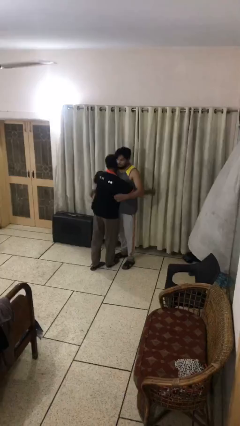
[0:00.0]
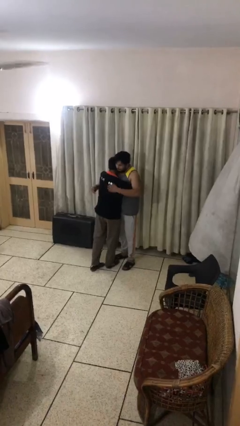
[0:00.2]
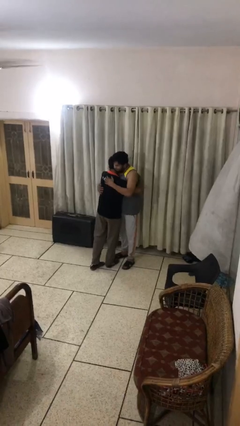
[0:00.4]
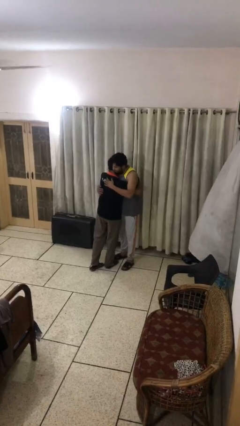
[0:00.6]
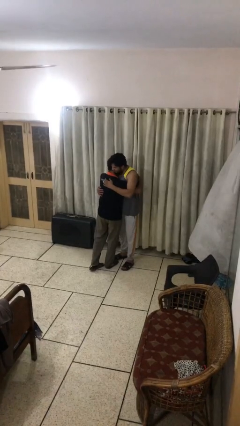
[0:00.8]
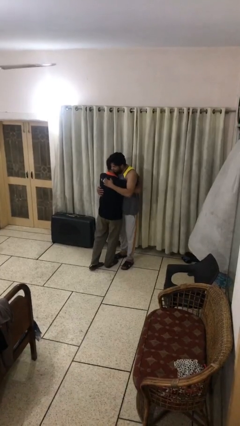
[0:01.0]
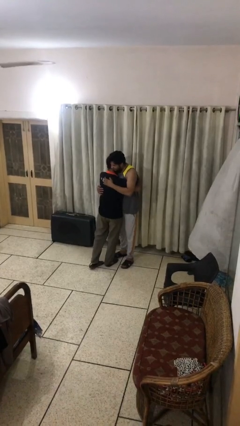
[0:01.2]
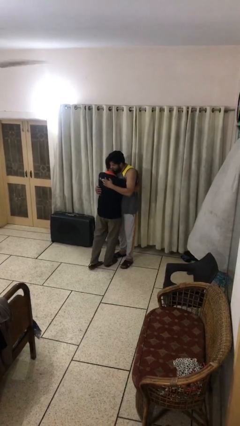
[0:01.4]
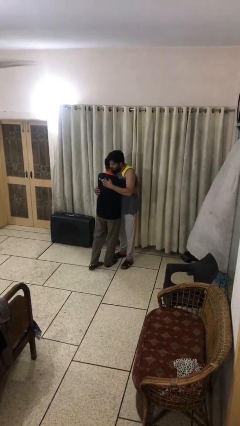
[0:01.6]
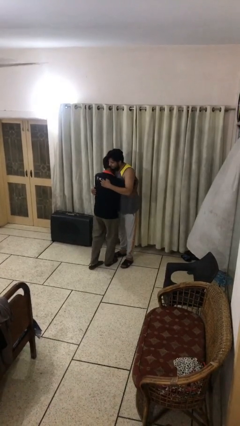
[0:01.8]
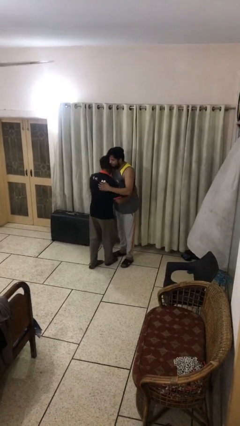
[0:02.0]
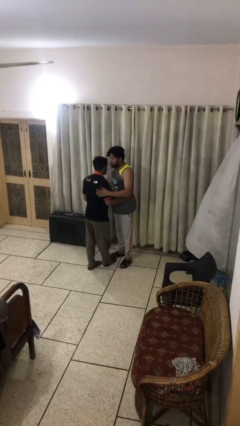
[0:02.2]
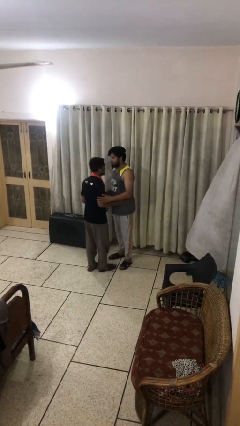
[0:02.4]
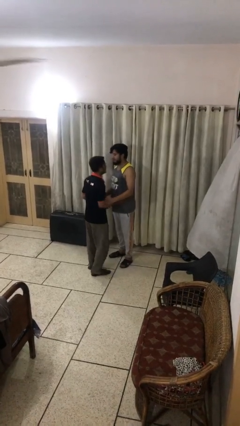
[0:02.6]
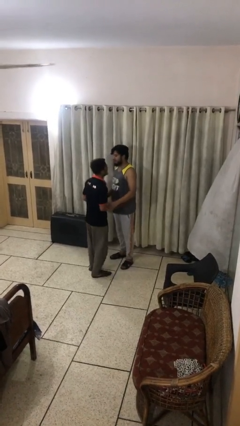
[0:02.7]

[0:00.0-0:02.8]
person embraces person

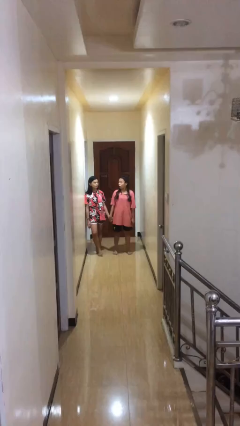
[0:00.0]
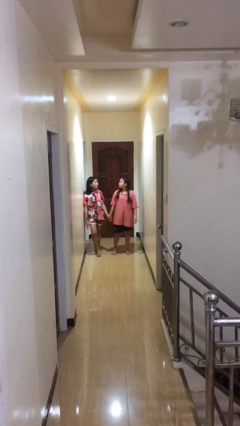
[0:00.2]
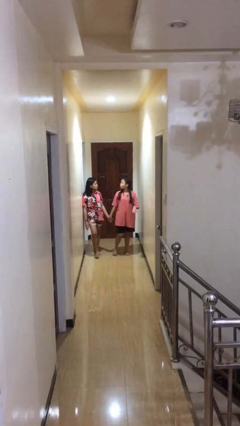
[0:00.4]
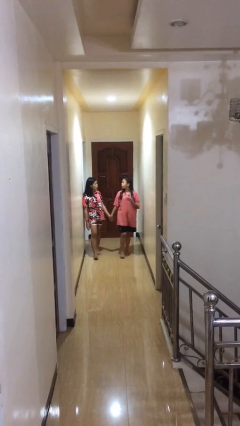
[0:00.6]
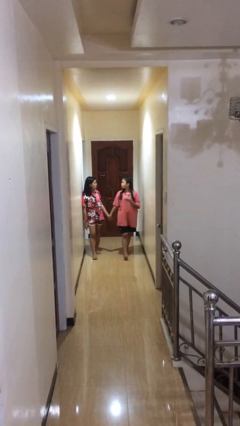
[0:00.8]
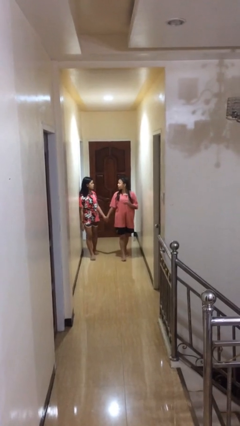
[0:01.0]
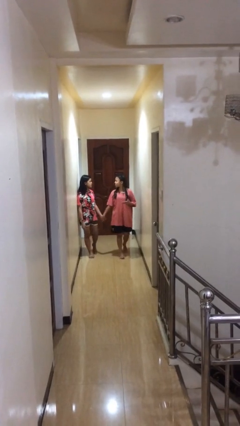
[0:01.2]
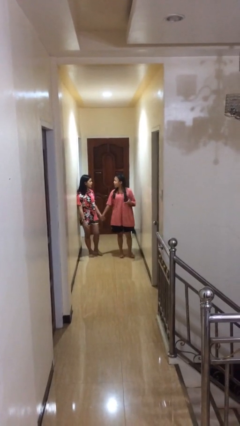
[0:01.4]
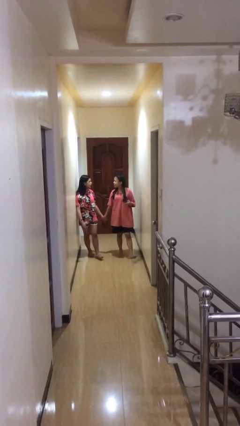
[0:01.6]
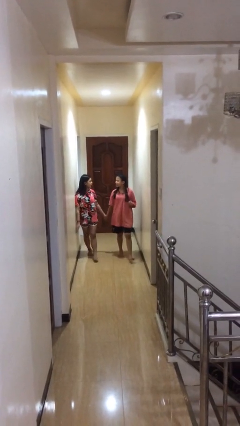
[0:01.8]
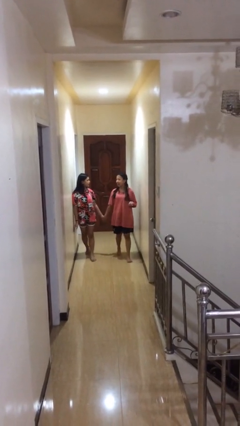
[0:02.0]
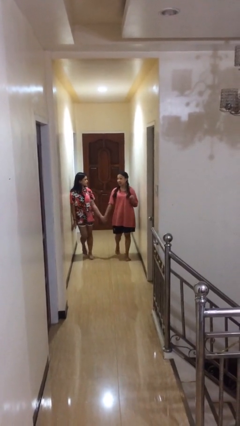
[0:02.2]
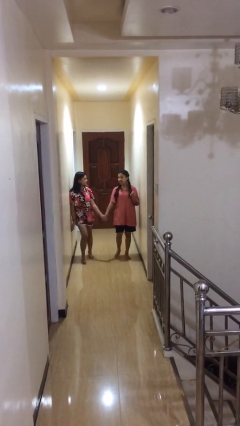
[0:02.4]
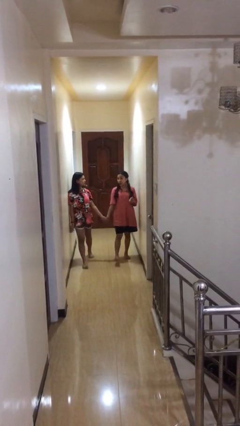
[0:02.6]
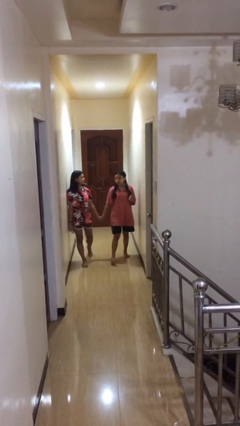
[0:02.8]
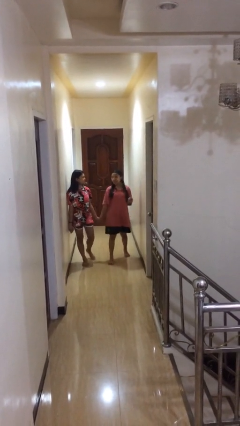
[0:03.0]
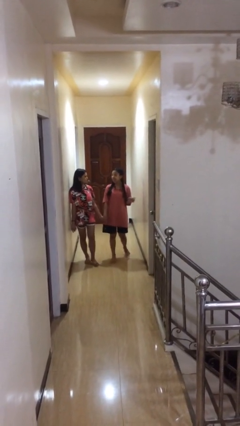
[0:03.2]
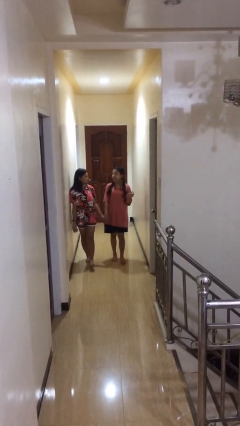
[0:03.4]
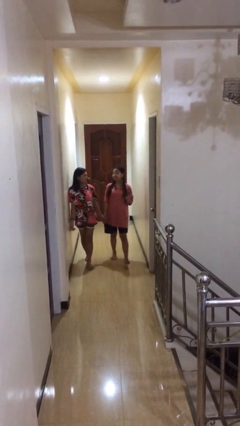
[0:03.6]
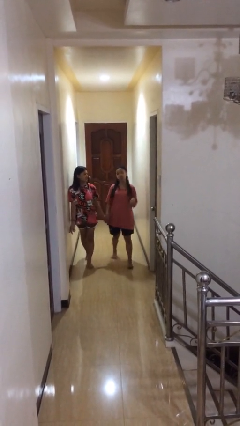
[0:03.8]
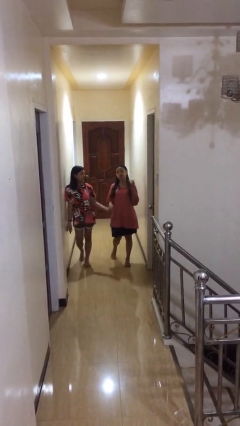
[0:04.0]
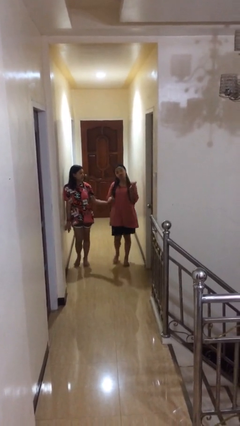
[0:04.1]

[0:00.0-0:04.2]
person holds hand

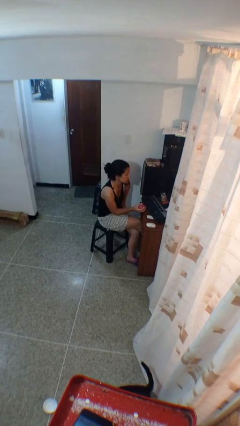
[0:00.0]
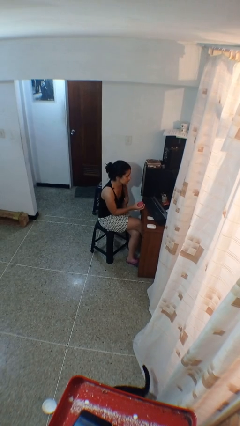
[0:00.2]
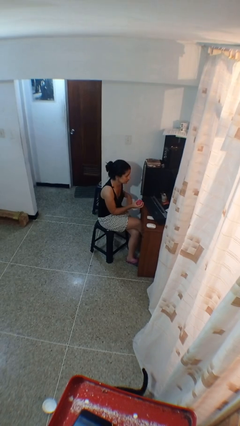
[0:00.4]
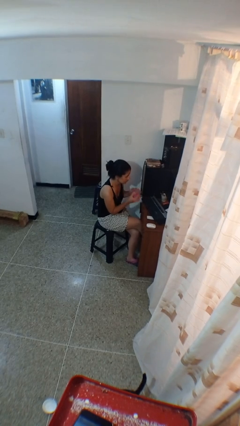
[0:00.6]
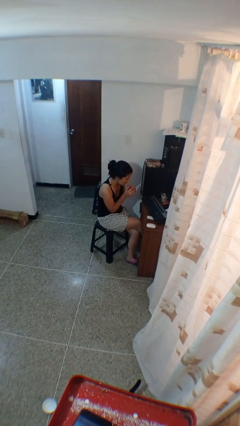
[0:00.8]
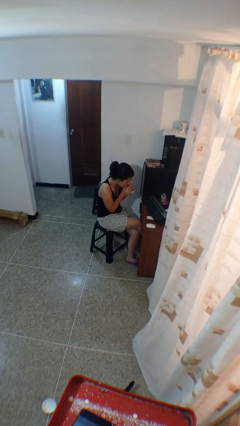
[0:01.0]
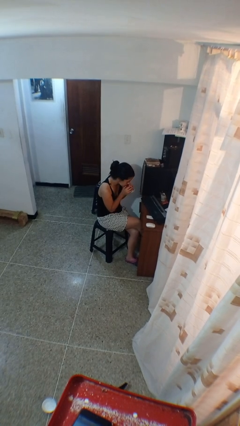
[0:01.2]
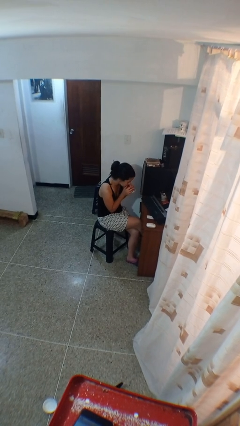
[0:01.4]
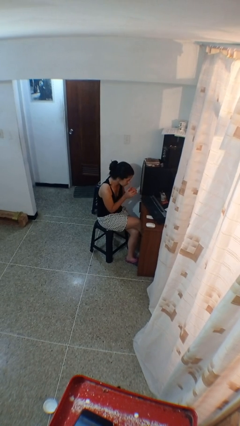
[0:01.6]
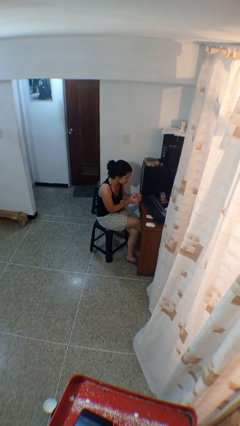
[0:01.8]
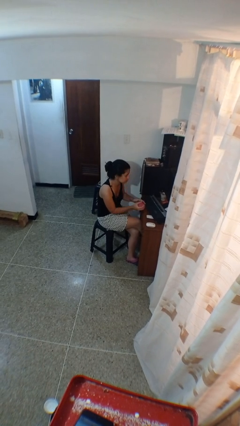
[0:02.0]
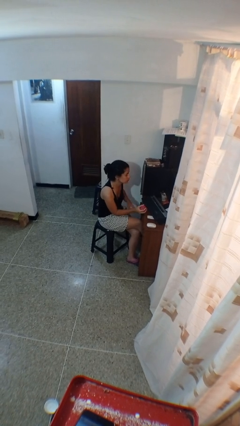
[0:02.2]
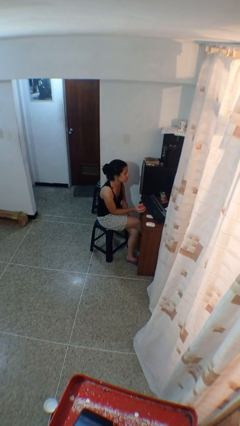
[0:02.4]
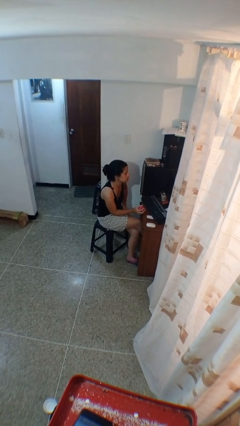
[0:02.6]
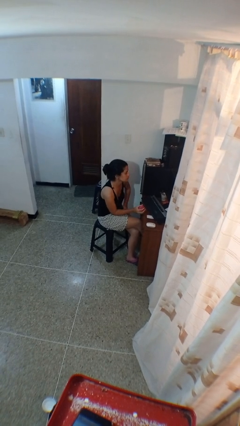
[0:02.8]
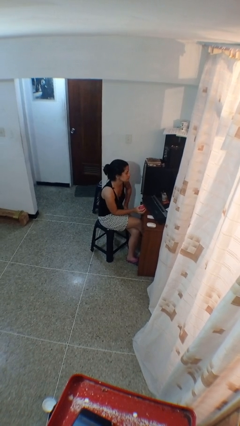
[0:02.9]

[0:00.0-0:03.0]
person eats apple

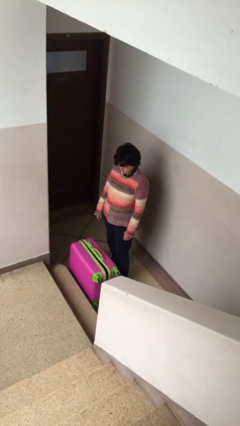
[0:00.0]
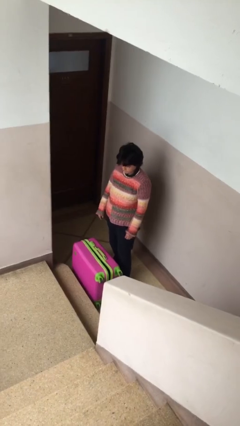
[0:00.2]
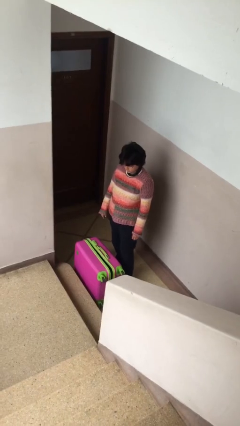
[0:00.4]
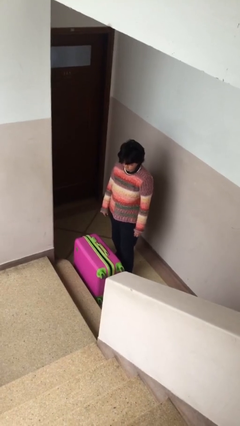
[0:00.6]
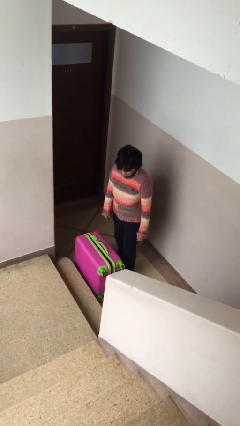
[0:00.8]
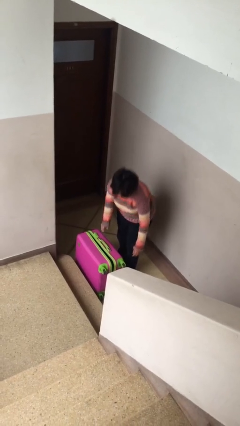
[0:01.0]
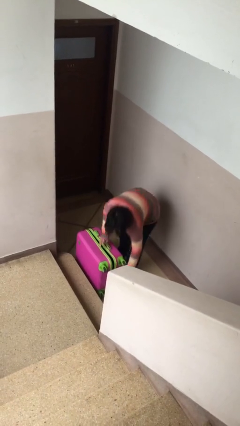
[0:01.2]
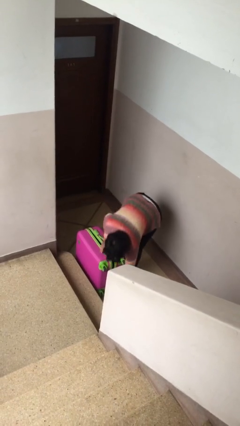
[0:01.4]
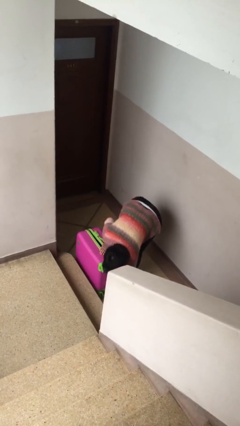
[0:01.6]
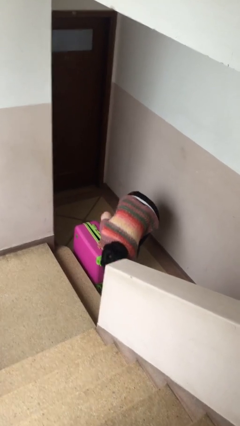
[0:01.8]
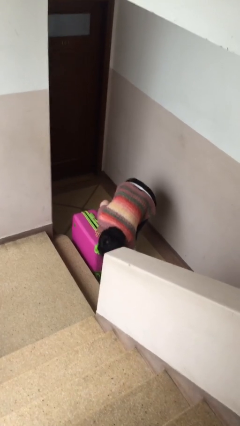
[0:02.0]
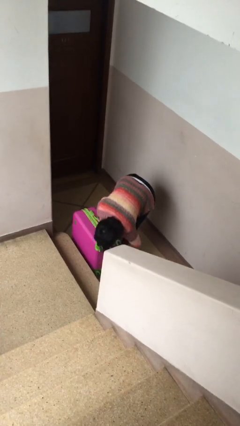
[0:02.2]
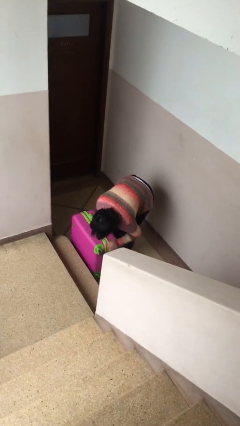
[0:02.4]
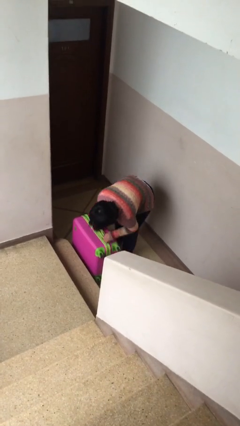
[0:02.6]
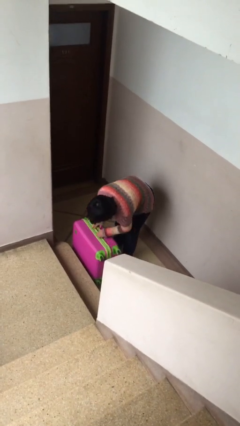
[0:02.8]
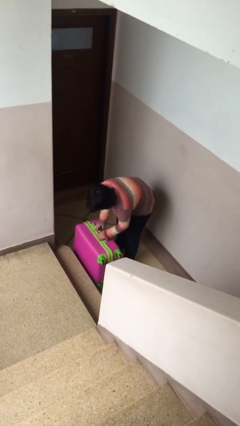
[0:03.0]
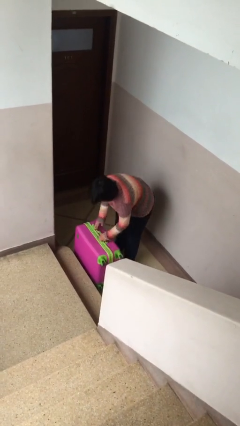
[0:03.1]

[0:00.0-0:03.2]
person closes suitcase

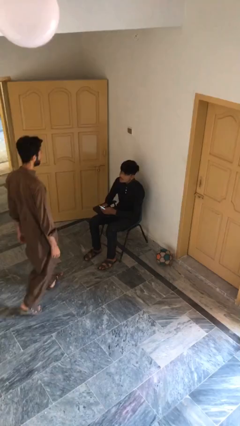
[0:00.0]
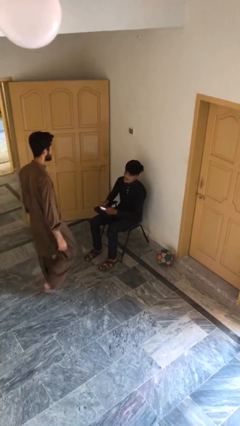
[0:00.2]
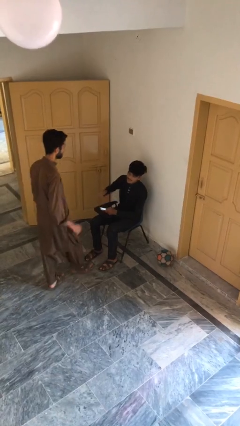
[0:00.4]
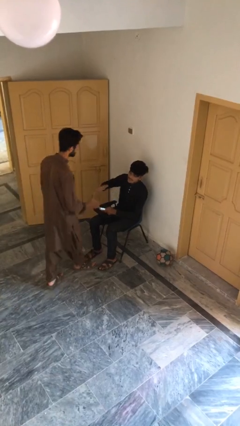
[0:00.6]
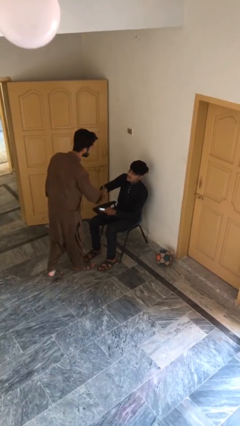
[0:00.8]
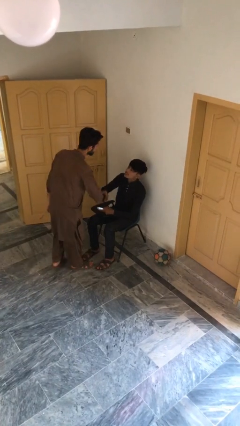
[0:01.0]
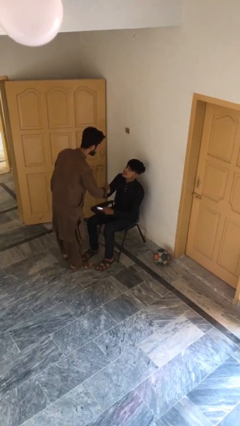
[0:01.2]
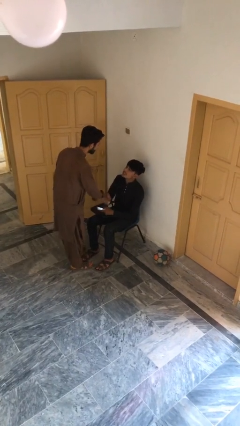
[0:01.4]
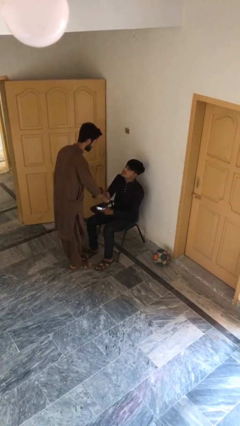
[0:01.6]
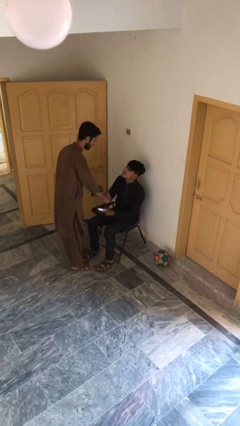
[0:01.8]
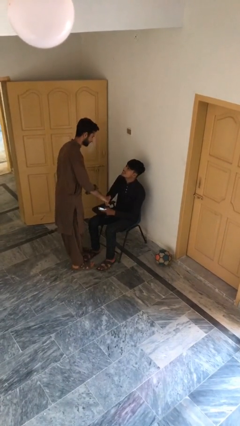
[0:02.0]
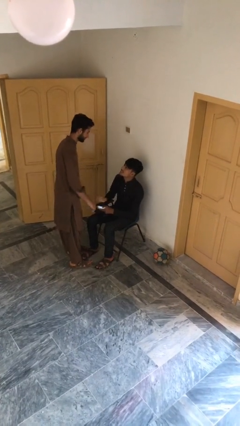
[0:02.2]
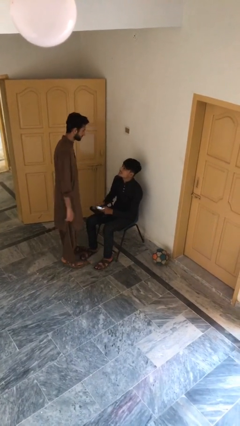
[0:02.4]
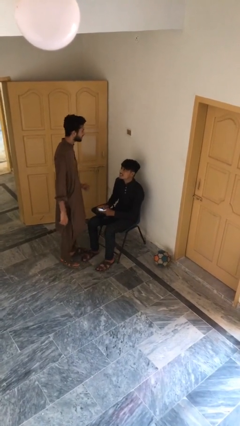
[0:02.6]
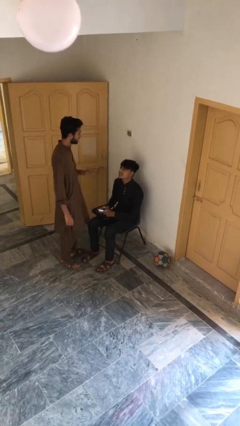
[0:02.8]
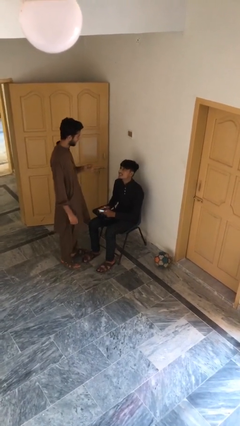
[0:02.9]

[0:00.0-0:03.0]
person shakes hand

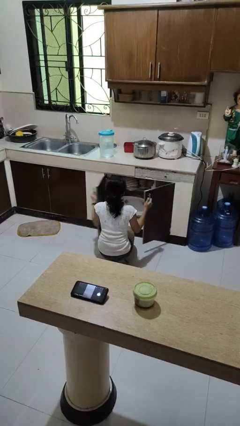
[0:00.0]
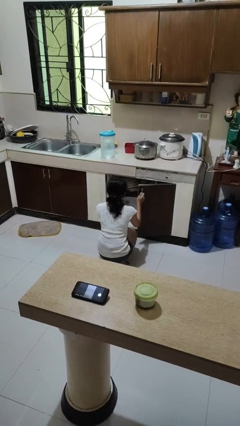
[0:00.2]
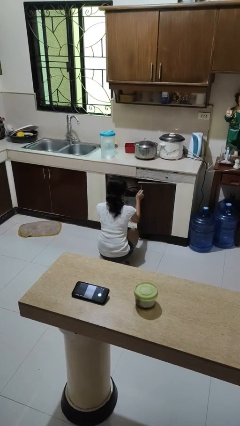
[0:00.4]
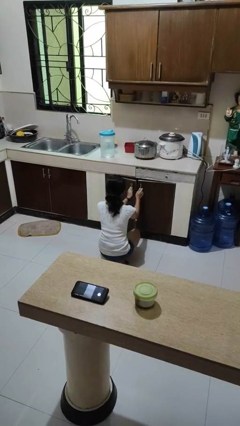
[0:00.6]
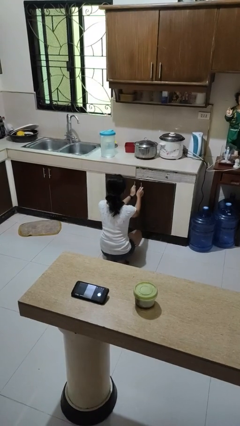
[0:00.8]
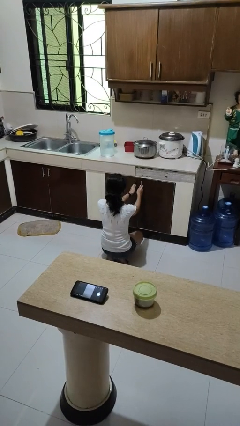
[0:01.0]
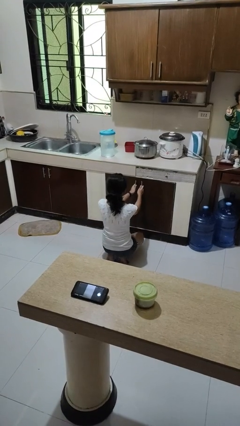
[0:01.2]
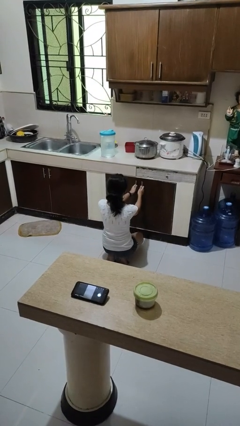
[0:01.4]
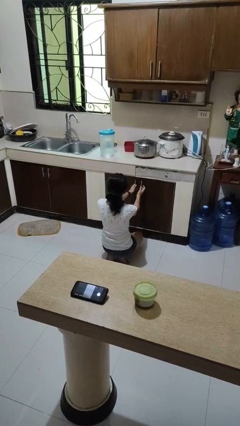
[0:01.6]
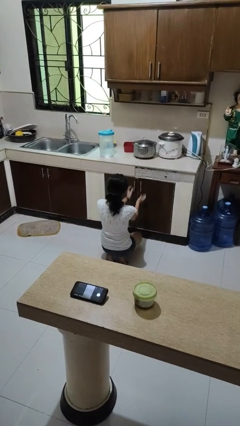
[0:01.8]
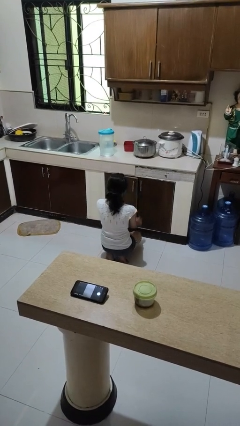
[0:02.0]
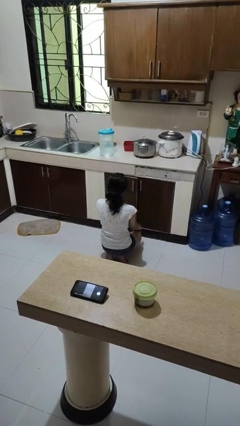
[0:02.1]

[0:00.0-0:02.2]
person closes dishwasher
